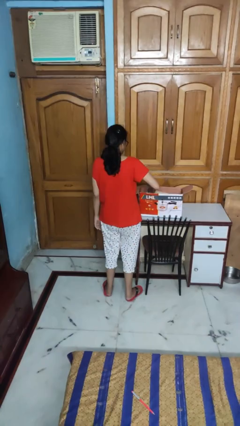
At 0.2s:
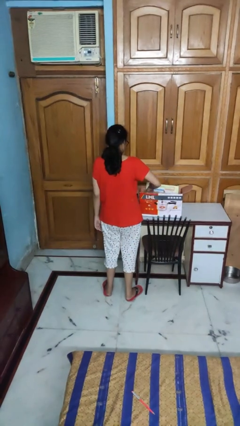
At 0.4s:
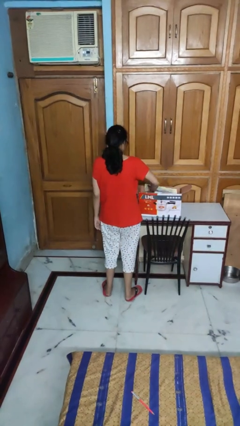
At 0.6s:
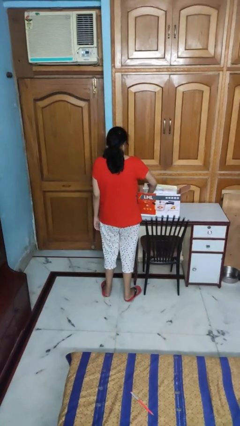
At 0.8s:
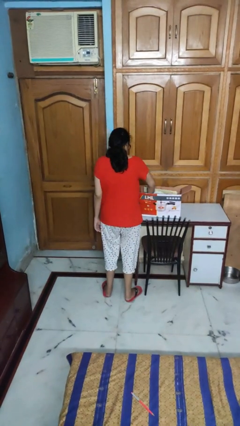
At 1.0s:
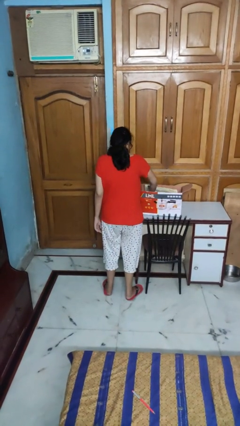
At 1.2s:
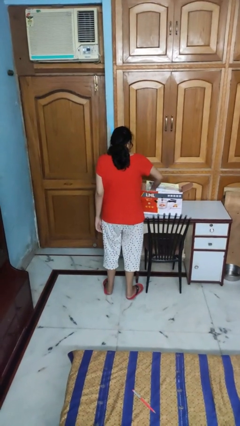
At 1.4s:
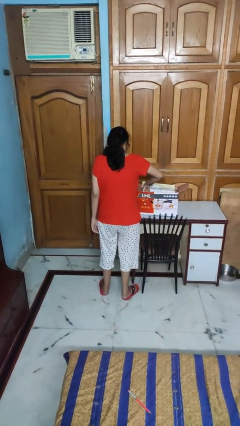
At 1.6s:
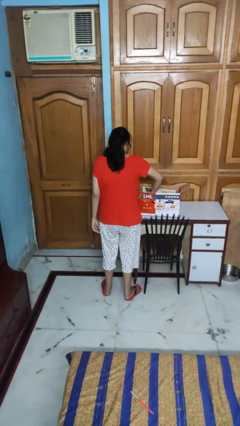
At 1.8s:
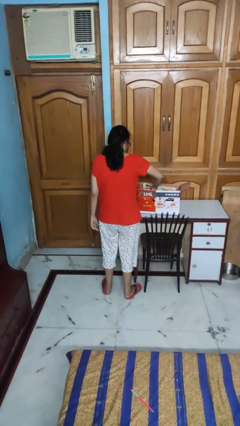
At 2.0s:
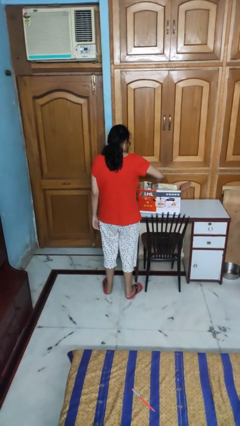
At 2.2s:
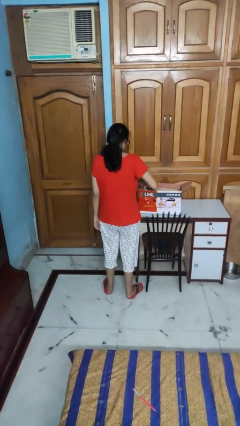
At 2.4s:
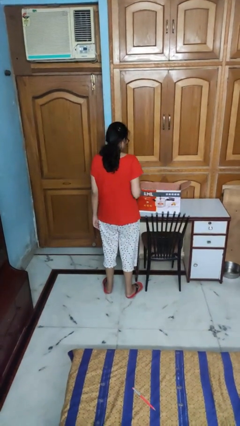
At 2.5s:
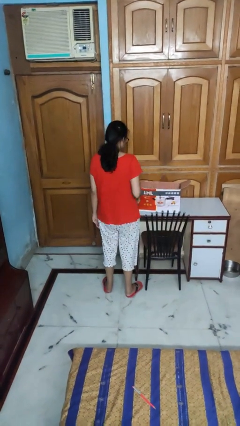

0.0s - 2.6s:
person searches in box

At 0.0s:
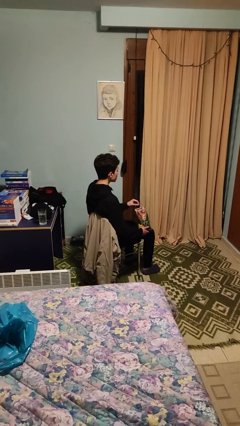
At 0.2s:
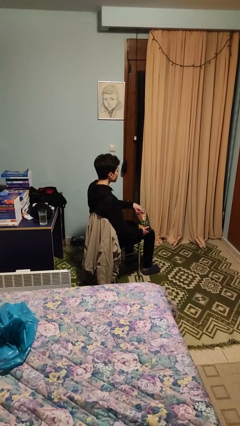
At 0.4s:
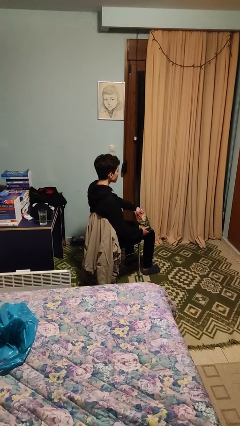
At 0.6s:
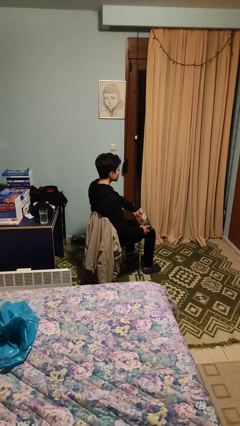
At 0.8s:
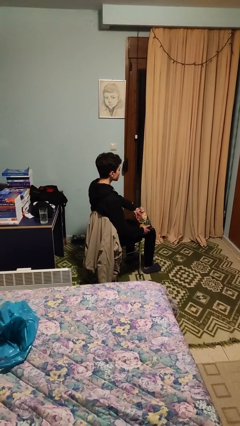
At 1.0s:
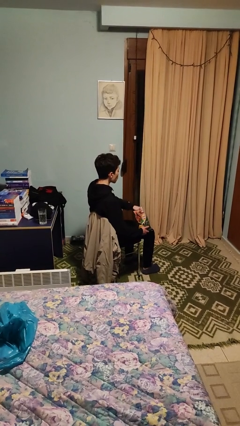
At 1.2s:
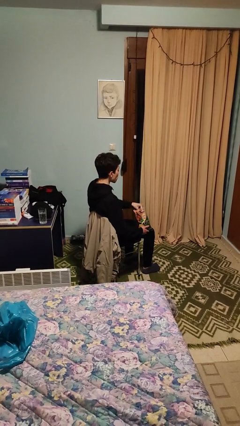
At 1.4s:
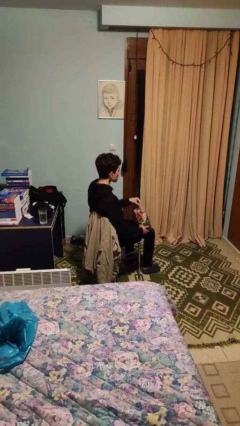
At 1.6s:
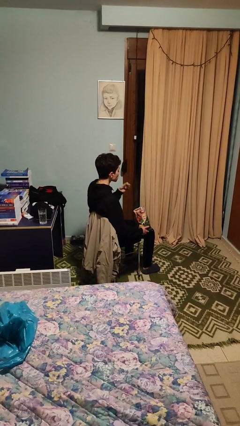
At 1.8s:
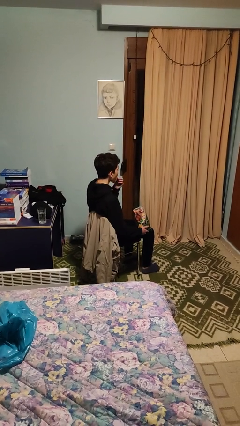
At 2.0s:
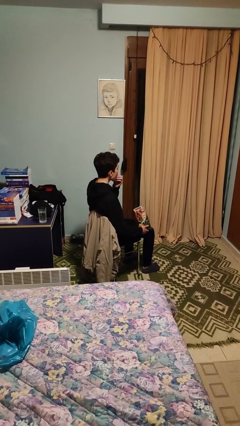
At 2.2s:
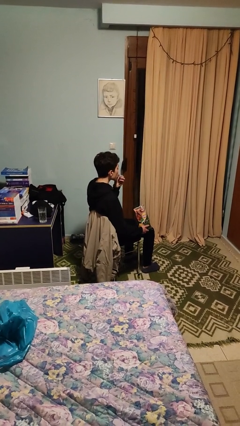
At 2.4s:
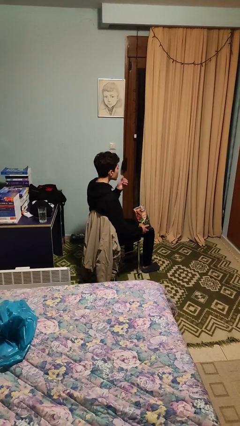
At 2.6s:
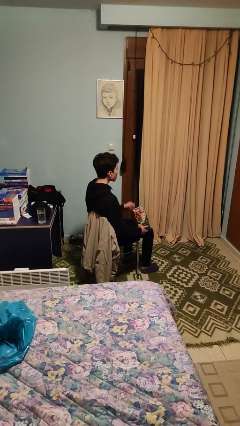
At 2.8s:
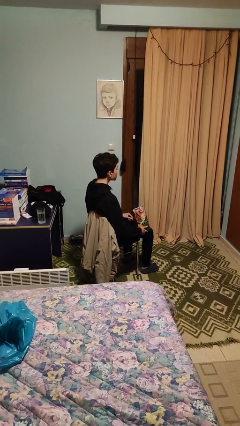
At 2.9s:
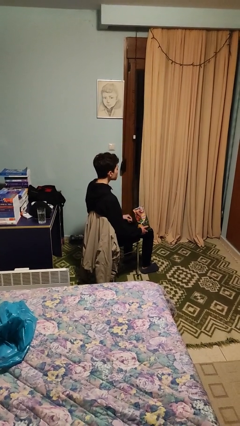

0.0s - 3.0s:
person eats snack from bag

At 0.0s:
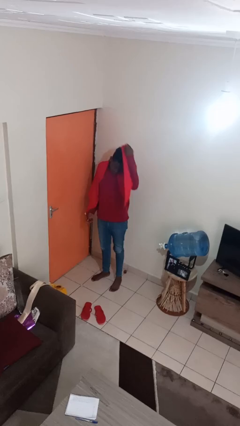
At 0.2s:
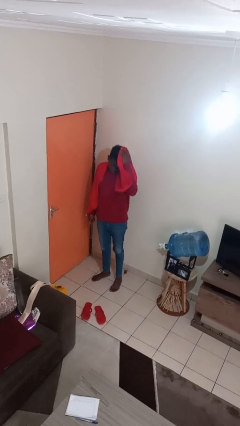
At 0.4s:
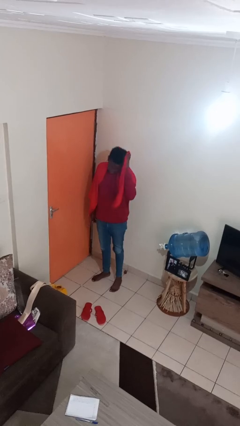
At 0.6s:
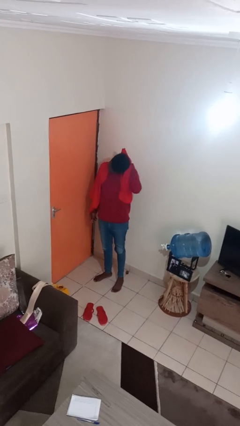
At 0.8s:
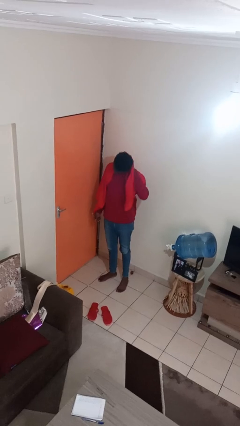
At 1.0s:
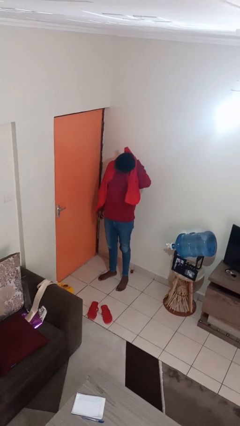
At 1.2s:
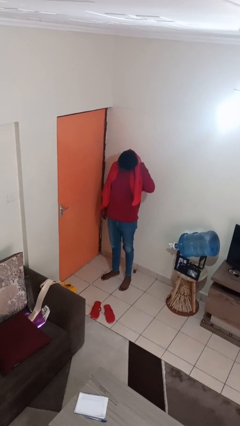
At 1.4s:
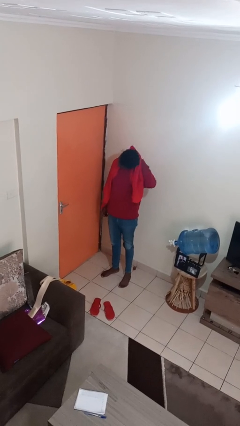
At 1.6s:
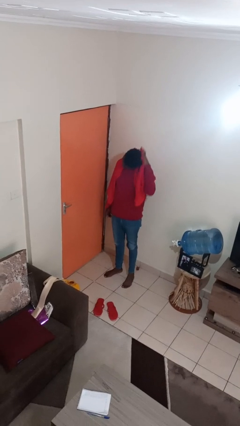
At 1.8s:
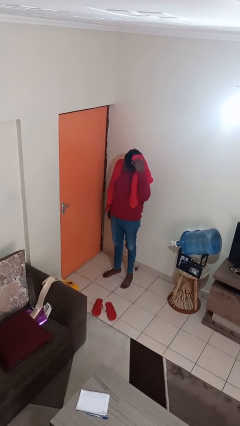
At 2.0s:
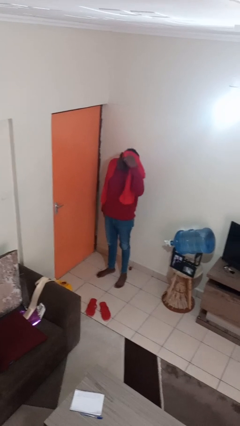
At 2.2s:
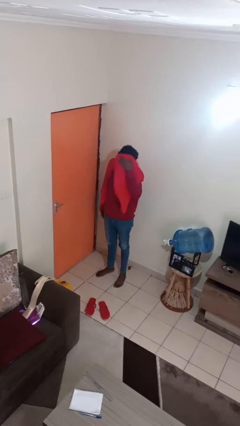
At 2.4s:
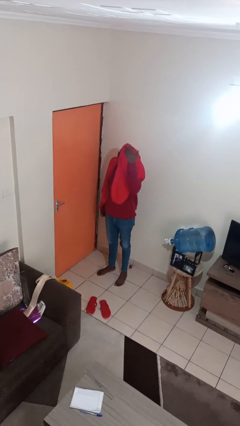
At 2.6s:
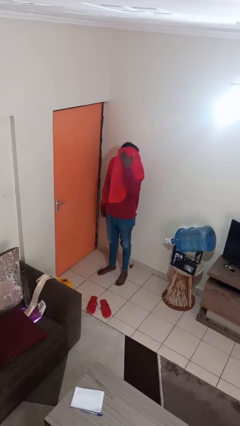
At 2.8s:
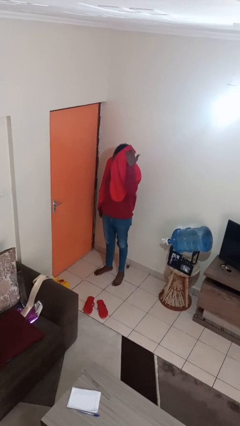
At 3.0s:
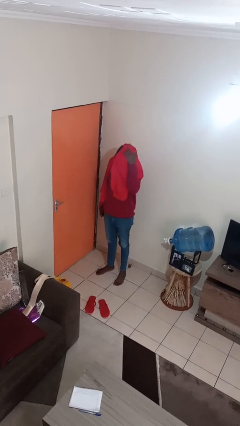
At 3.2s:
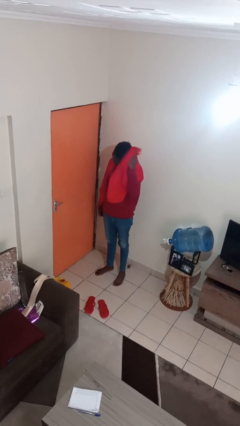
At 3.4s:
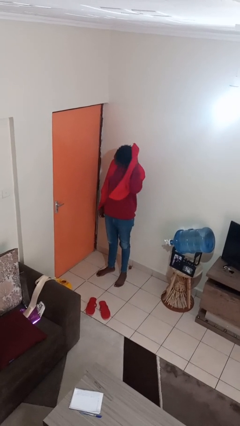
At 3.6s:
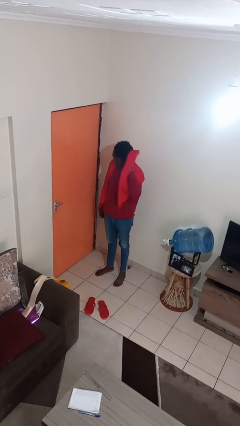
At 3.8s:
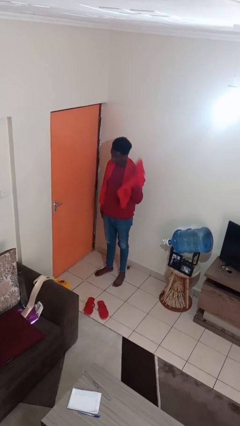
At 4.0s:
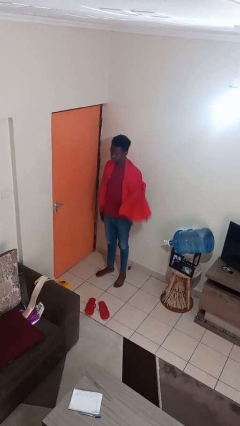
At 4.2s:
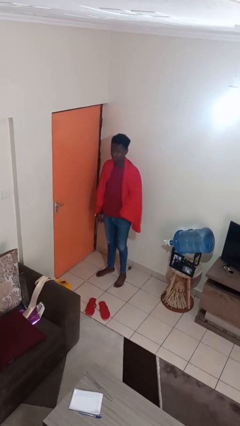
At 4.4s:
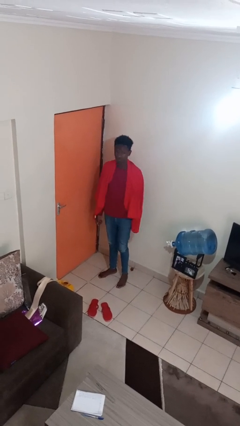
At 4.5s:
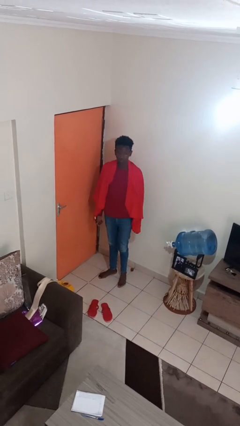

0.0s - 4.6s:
person dries hair with towel

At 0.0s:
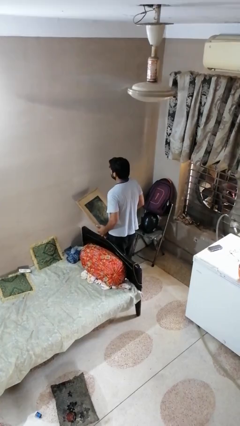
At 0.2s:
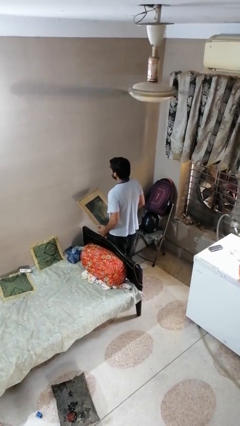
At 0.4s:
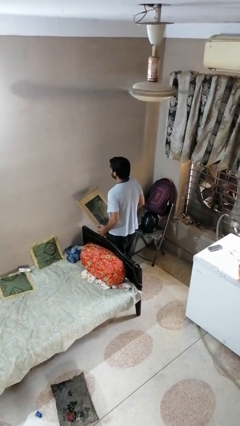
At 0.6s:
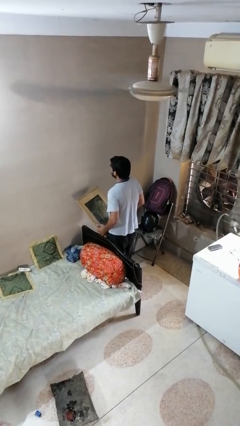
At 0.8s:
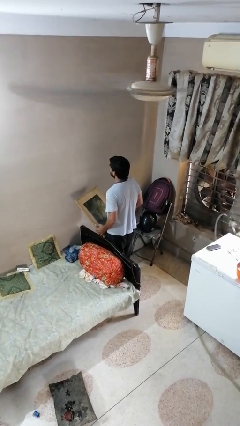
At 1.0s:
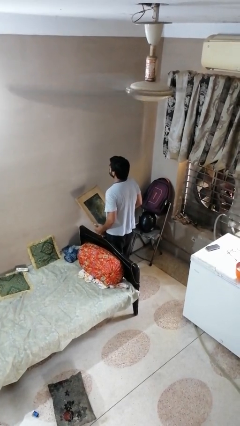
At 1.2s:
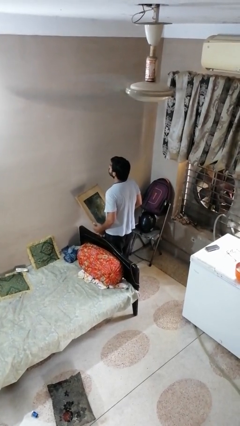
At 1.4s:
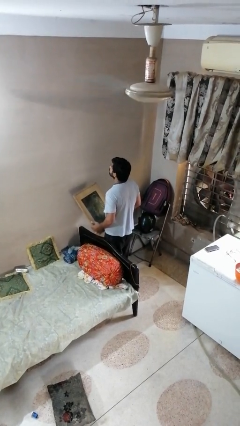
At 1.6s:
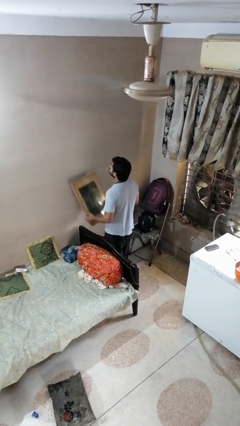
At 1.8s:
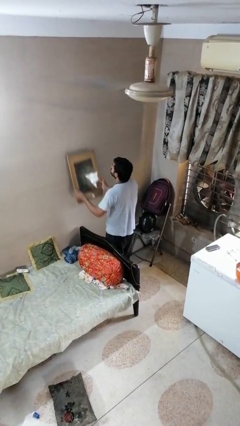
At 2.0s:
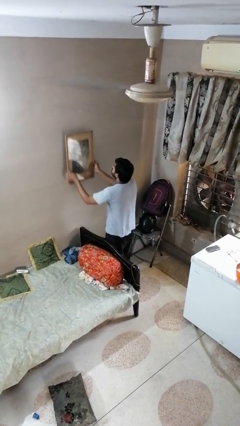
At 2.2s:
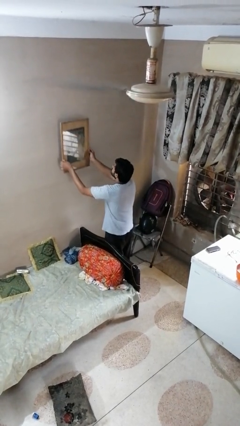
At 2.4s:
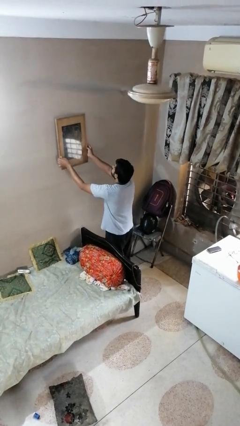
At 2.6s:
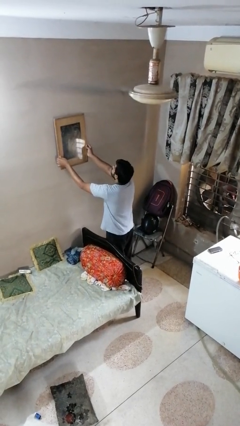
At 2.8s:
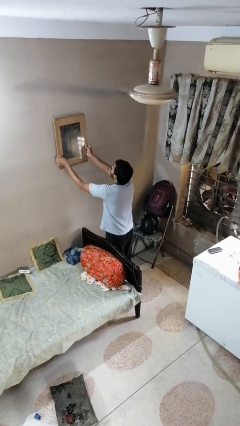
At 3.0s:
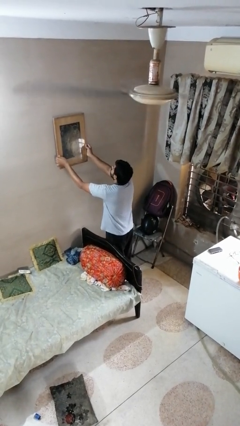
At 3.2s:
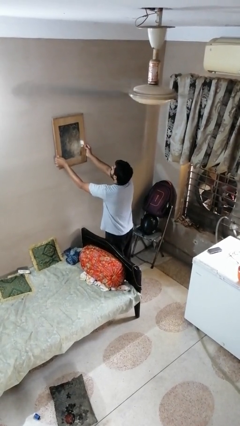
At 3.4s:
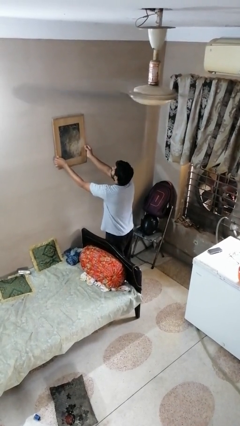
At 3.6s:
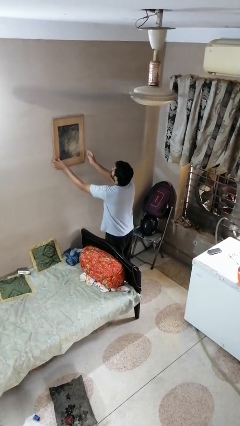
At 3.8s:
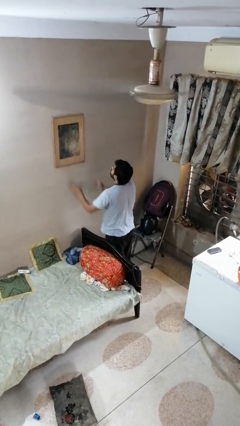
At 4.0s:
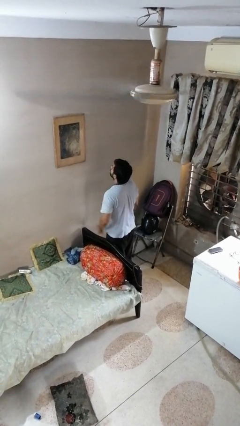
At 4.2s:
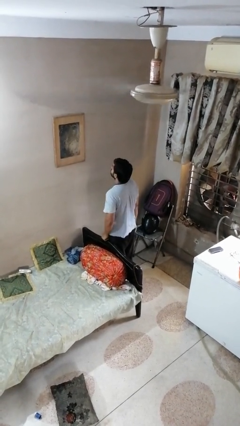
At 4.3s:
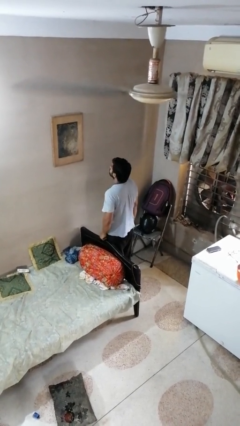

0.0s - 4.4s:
person puts up picture frame

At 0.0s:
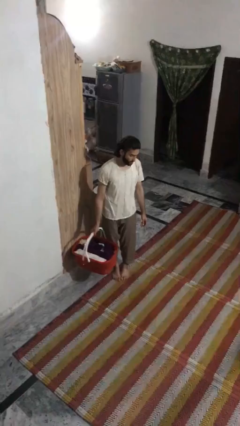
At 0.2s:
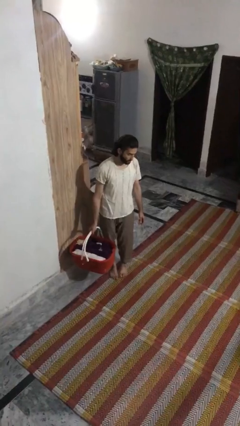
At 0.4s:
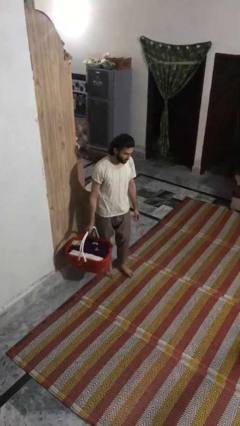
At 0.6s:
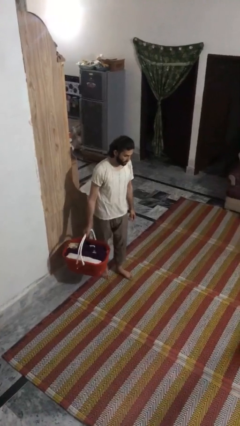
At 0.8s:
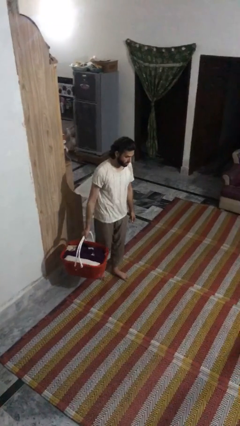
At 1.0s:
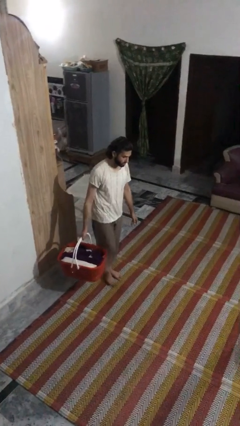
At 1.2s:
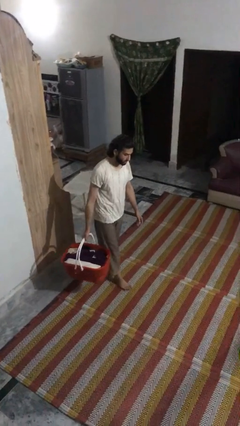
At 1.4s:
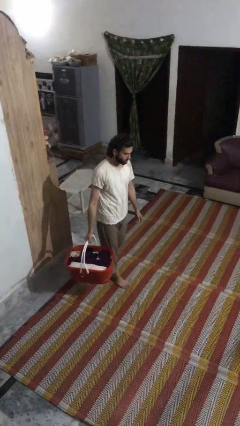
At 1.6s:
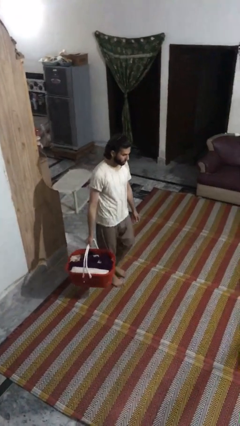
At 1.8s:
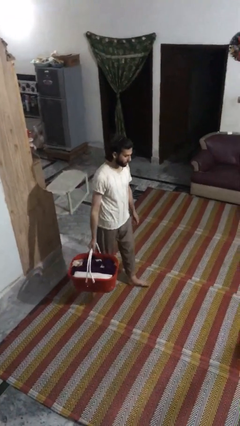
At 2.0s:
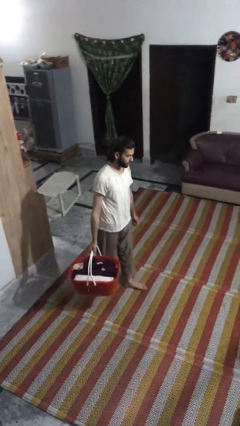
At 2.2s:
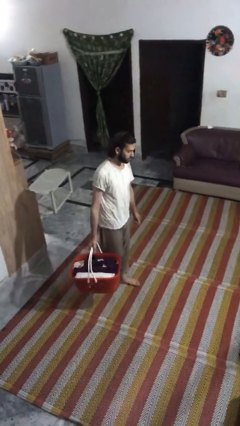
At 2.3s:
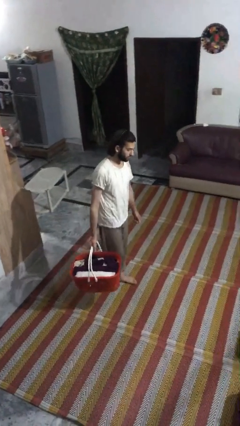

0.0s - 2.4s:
person carries laundry basket

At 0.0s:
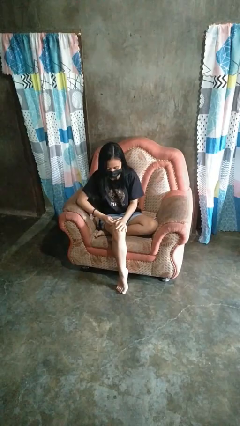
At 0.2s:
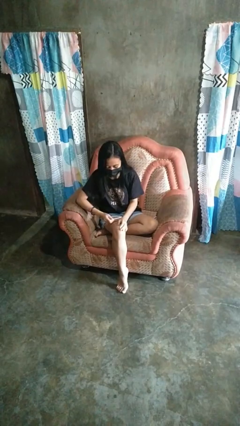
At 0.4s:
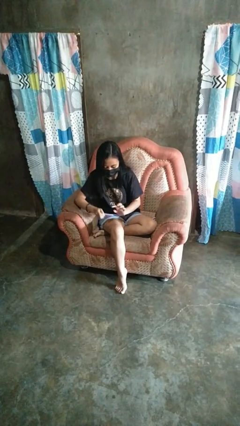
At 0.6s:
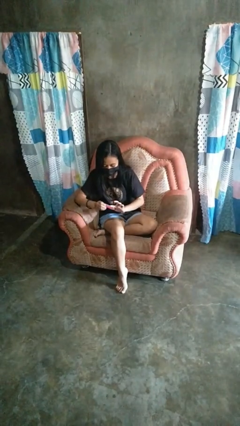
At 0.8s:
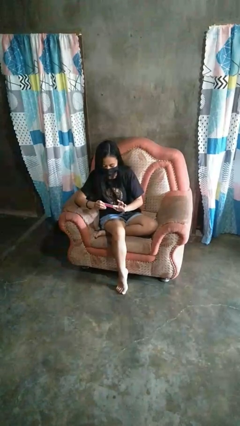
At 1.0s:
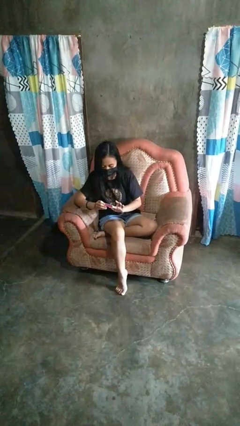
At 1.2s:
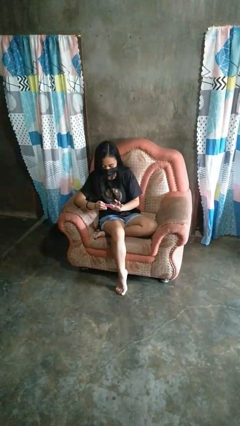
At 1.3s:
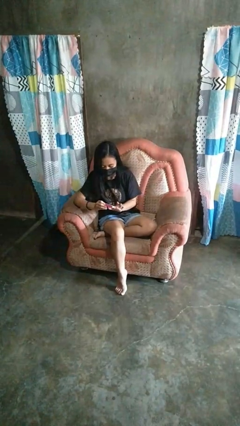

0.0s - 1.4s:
person files fingernails
